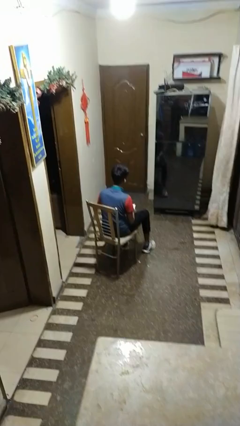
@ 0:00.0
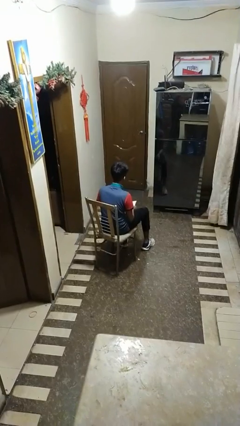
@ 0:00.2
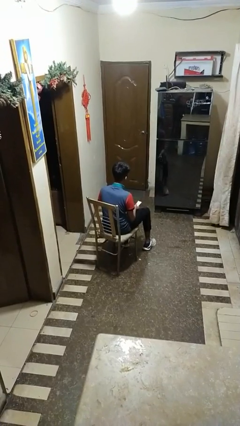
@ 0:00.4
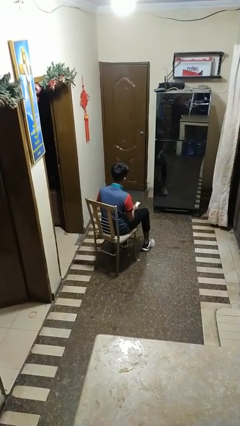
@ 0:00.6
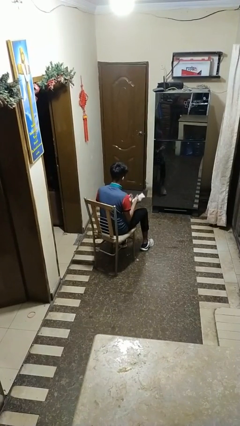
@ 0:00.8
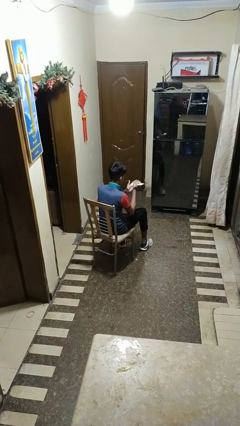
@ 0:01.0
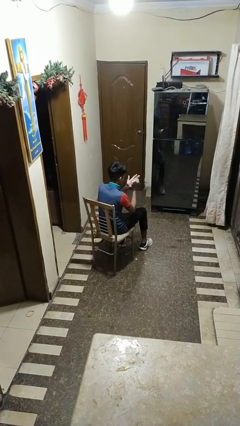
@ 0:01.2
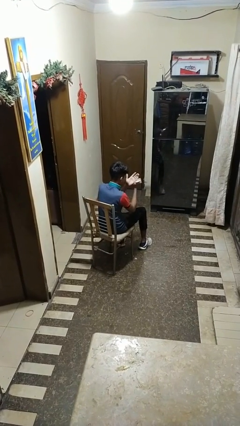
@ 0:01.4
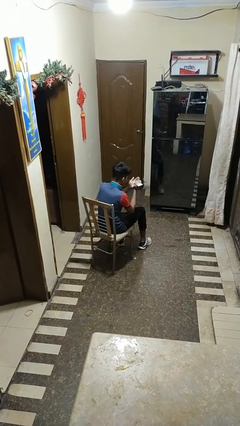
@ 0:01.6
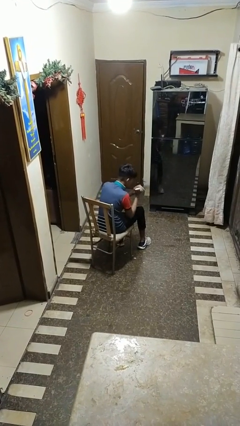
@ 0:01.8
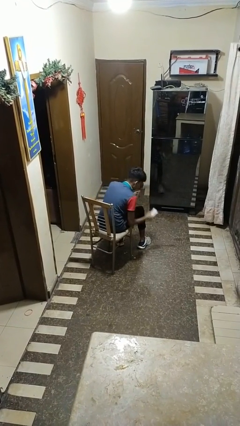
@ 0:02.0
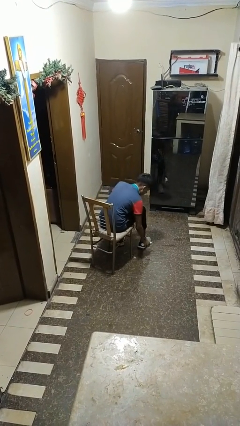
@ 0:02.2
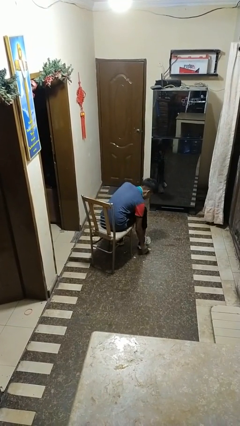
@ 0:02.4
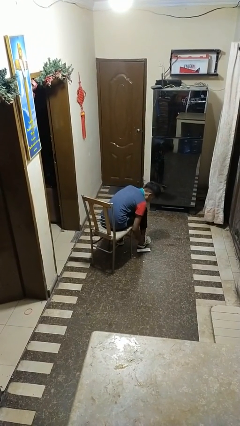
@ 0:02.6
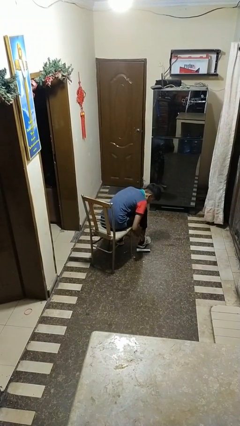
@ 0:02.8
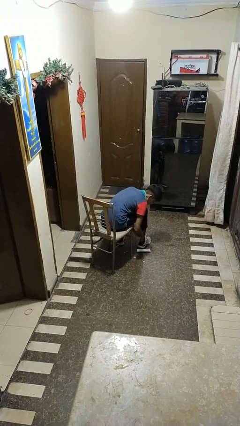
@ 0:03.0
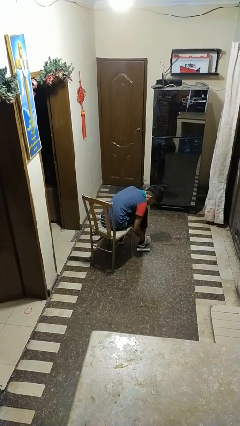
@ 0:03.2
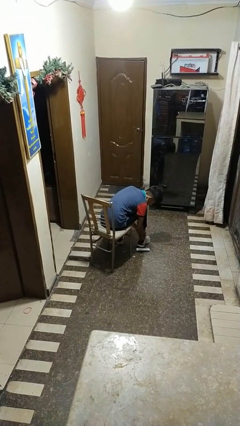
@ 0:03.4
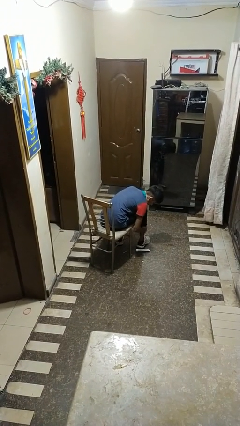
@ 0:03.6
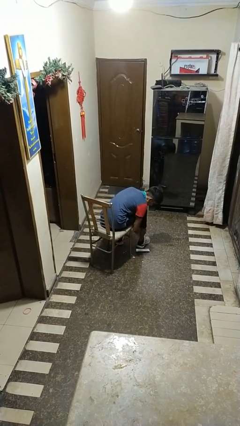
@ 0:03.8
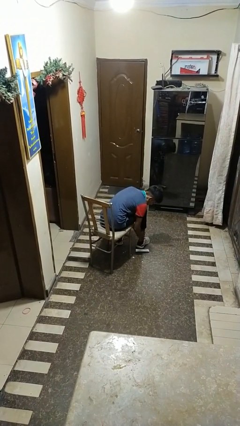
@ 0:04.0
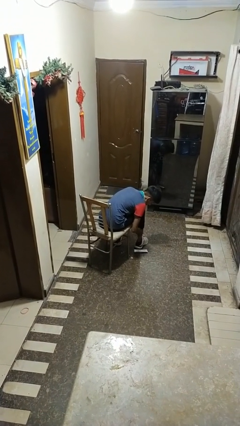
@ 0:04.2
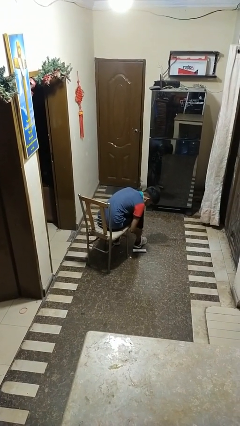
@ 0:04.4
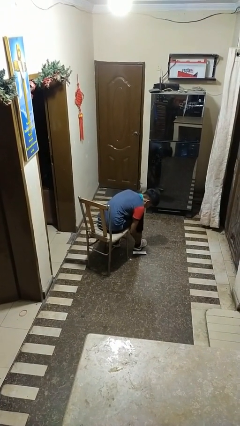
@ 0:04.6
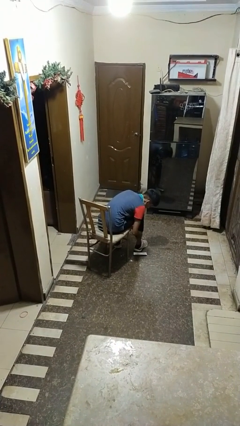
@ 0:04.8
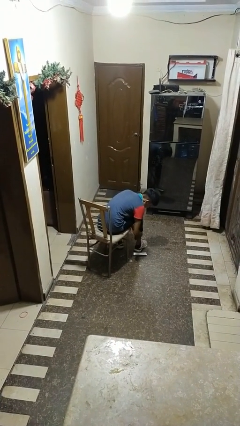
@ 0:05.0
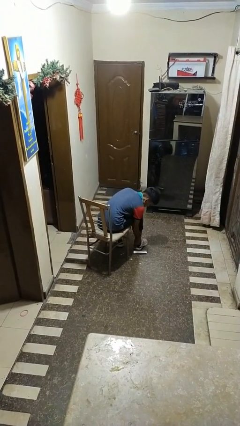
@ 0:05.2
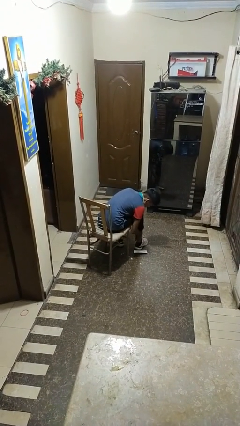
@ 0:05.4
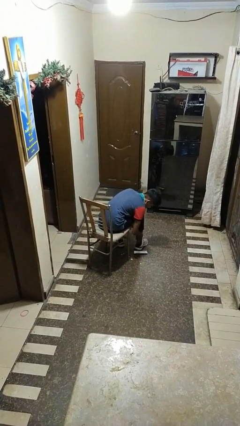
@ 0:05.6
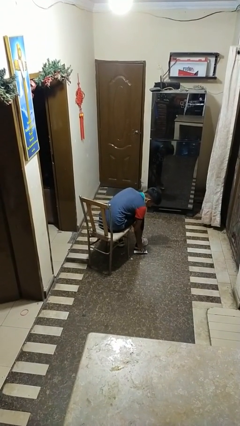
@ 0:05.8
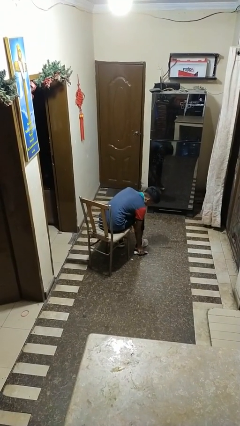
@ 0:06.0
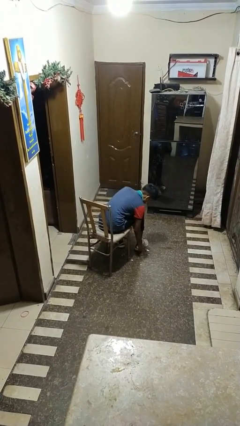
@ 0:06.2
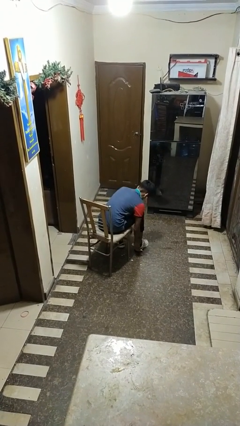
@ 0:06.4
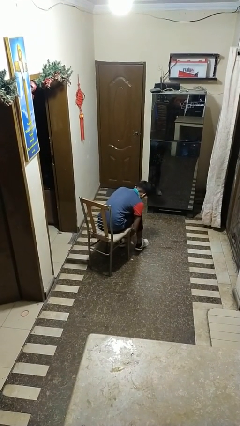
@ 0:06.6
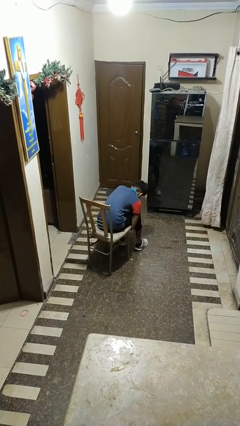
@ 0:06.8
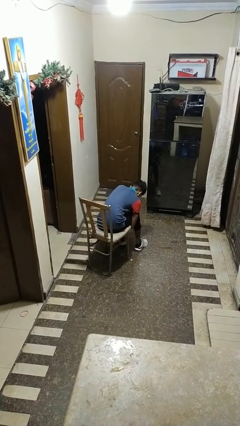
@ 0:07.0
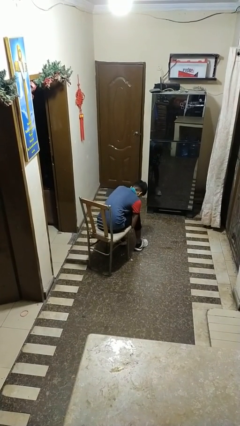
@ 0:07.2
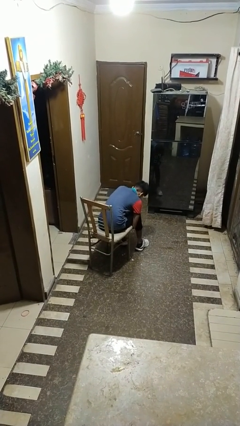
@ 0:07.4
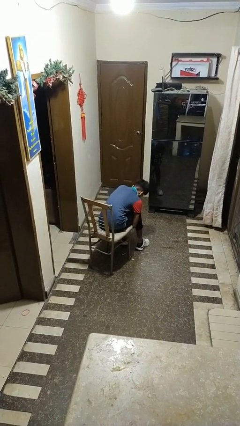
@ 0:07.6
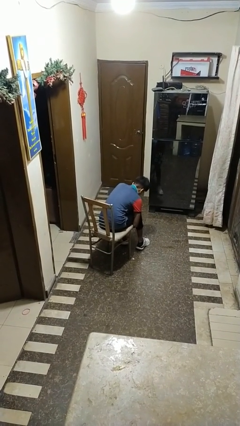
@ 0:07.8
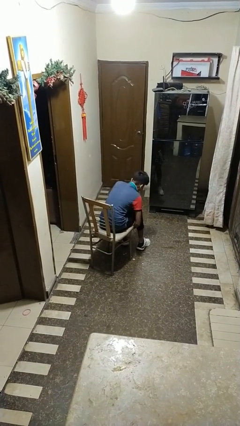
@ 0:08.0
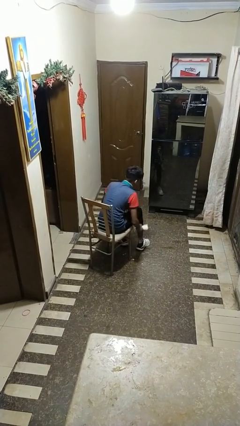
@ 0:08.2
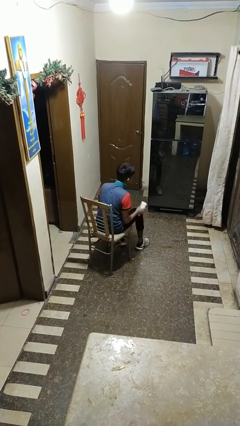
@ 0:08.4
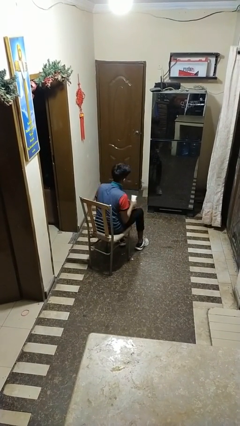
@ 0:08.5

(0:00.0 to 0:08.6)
person applies facial moisturizer

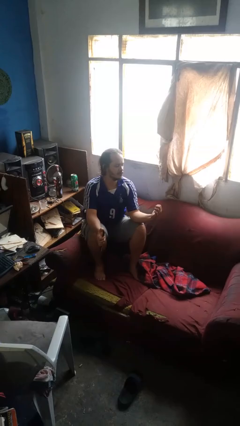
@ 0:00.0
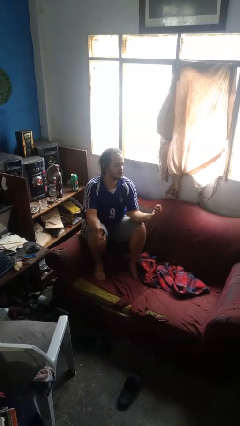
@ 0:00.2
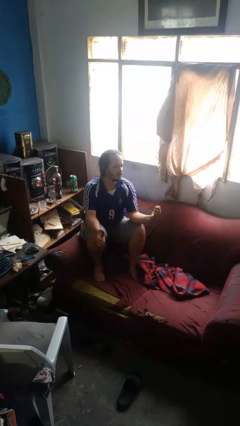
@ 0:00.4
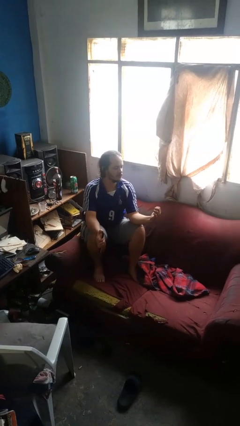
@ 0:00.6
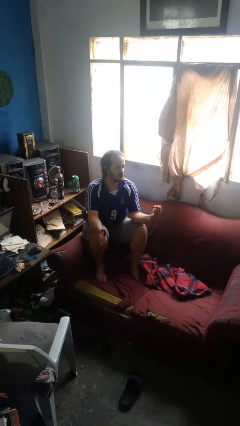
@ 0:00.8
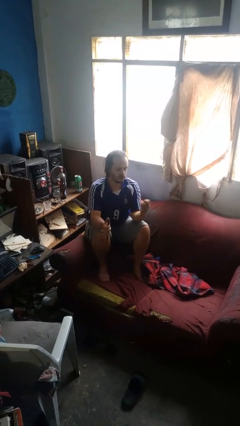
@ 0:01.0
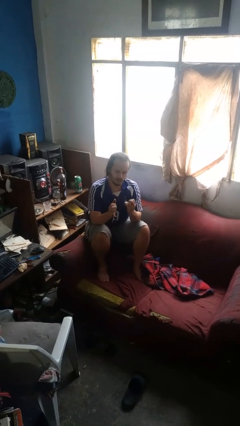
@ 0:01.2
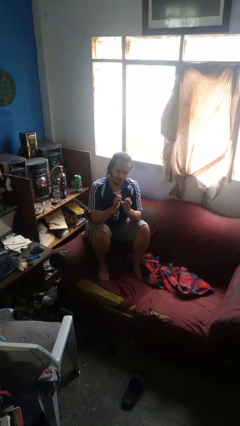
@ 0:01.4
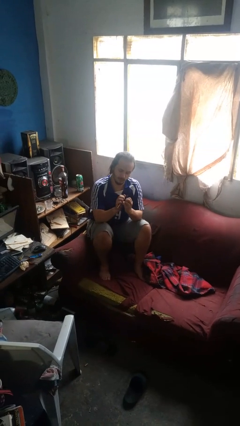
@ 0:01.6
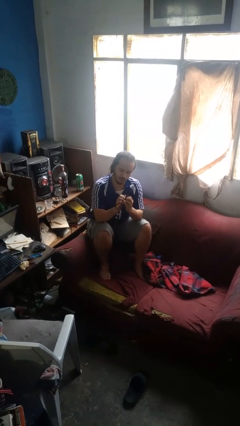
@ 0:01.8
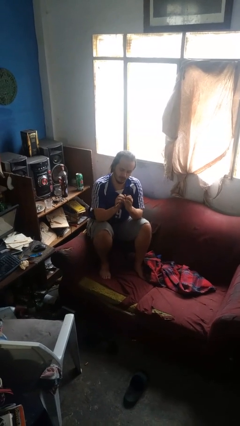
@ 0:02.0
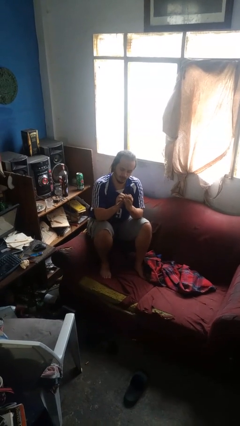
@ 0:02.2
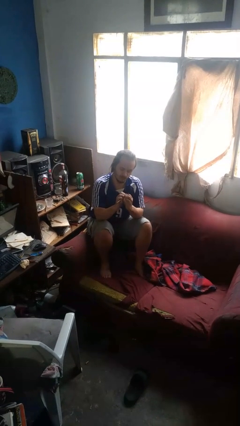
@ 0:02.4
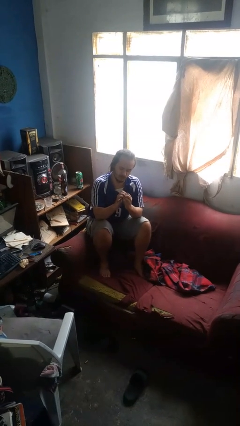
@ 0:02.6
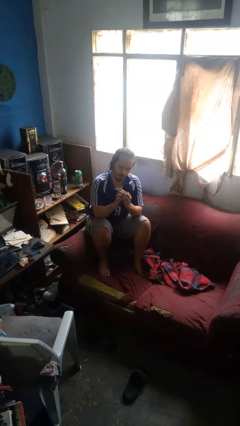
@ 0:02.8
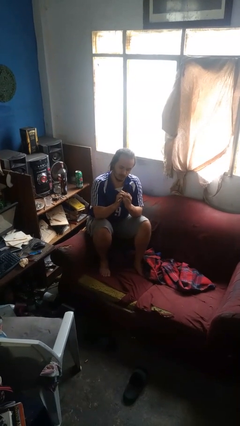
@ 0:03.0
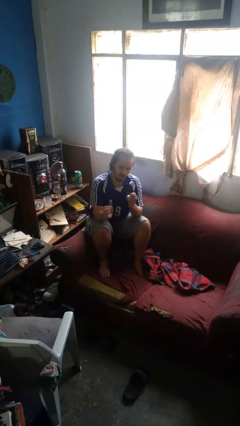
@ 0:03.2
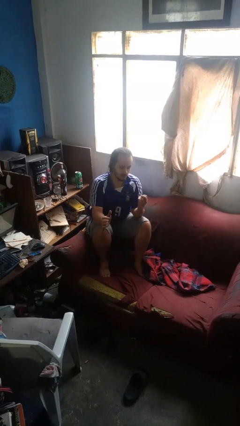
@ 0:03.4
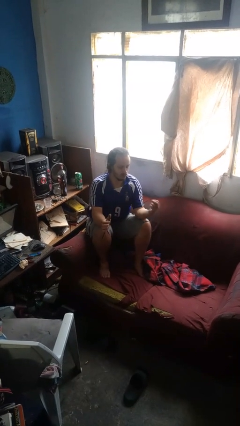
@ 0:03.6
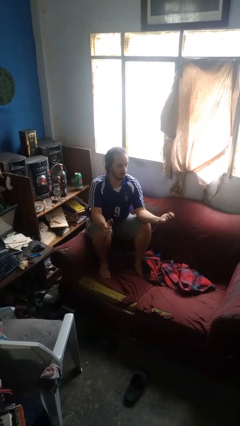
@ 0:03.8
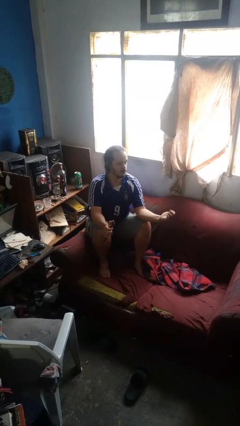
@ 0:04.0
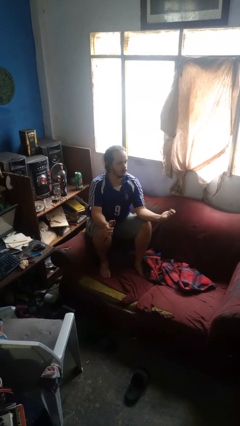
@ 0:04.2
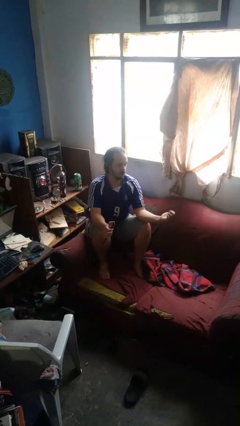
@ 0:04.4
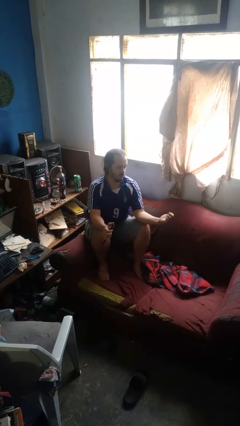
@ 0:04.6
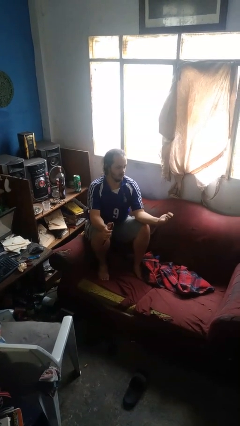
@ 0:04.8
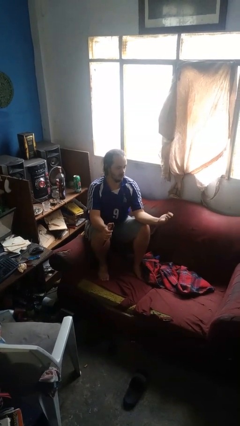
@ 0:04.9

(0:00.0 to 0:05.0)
person files fingernails

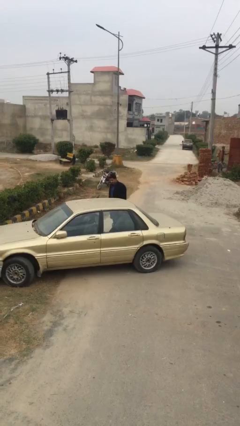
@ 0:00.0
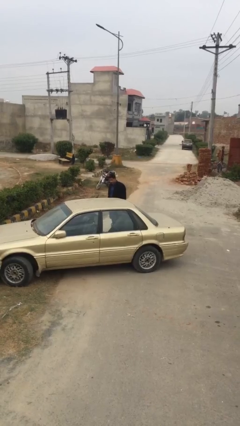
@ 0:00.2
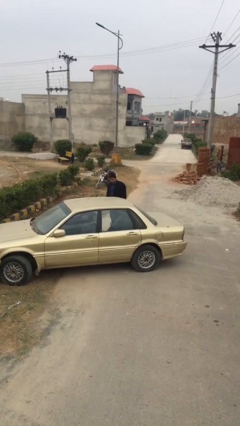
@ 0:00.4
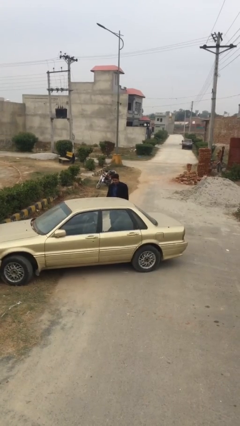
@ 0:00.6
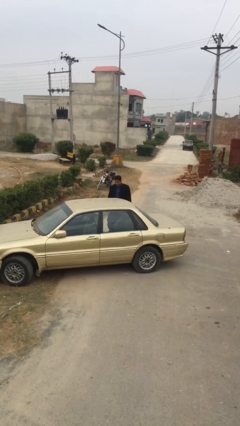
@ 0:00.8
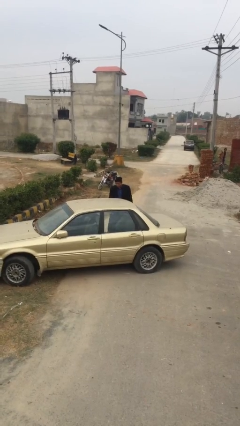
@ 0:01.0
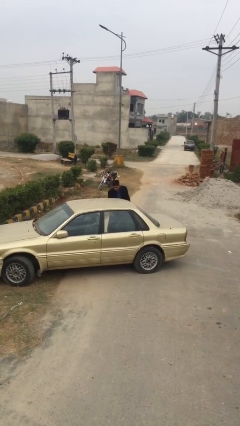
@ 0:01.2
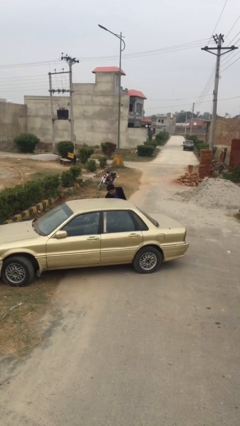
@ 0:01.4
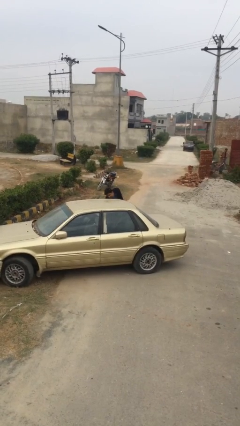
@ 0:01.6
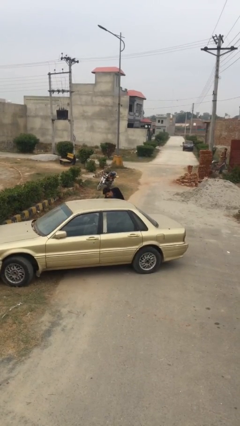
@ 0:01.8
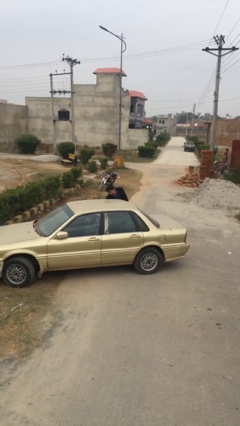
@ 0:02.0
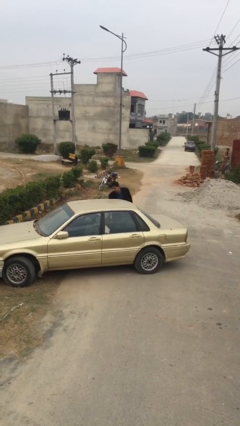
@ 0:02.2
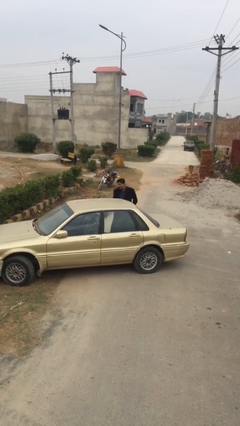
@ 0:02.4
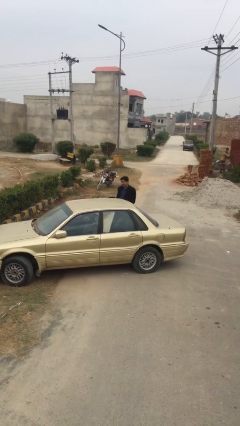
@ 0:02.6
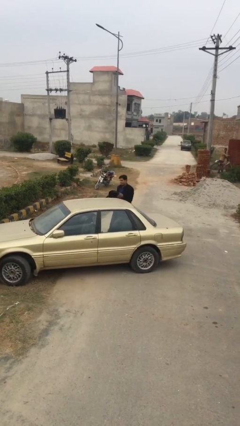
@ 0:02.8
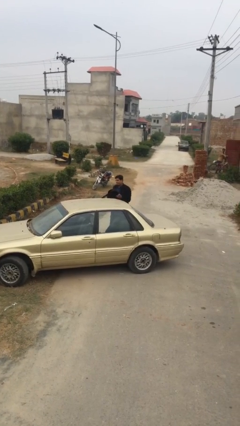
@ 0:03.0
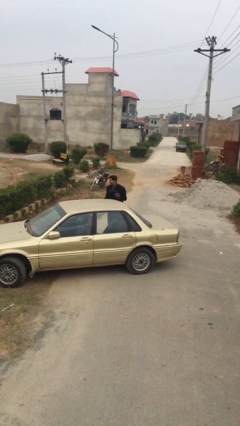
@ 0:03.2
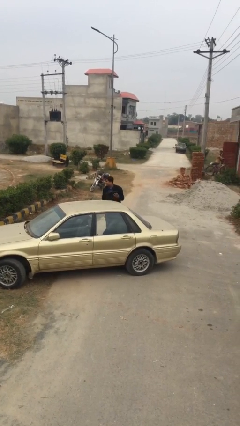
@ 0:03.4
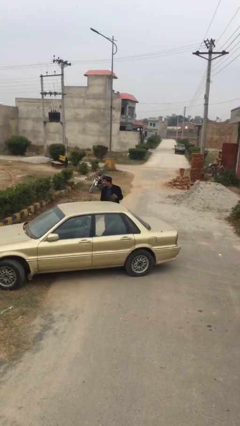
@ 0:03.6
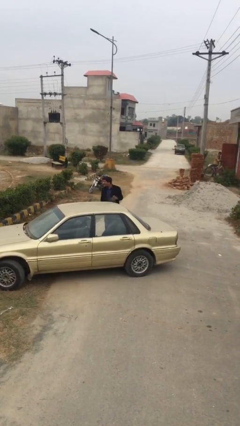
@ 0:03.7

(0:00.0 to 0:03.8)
person unloads car

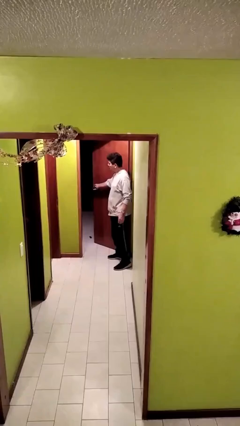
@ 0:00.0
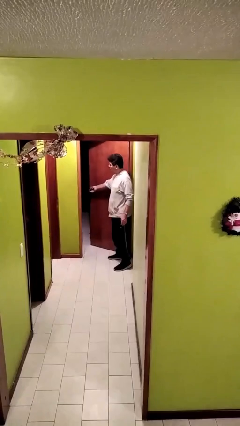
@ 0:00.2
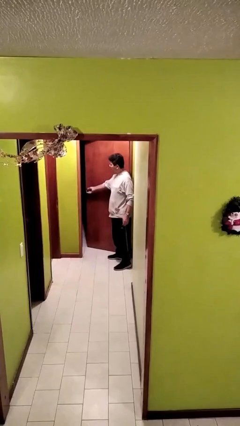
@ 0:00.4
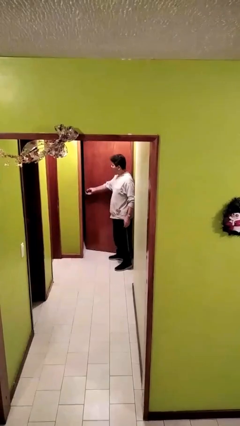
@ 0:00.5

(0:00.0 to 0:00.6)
person closes facility door

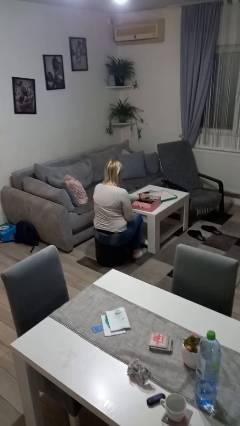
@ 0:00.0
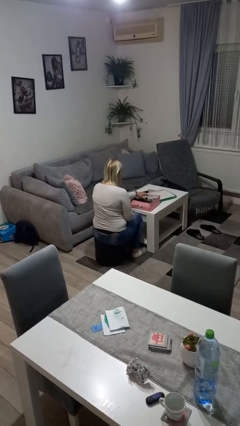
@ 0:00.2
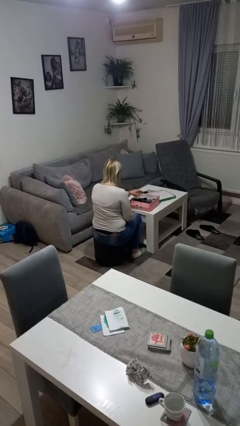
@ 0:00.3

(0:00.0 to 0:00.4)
person puts object into box
